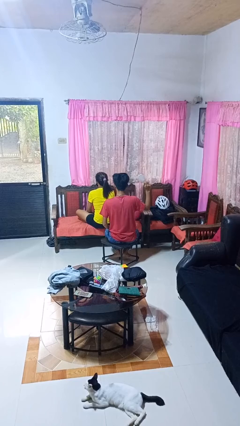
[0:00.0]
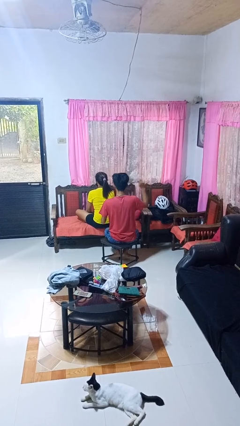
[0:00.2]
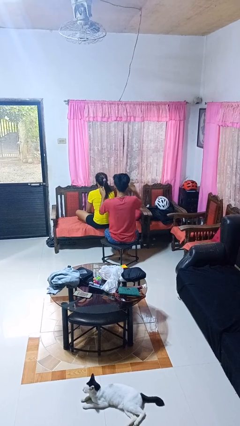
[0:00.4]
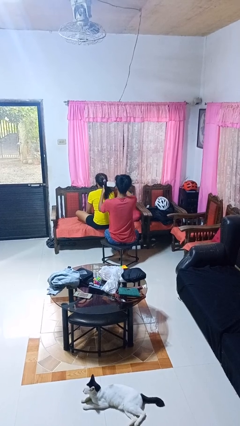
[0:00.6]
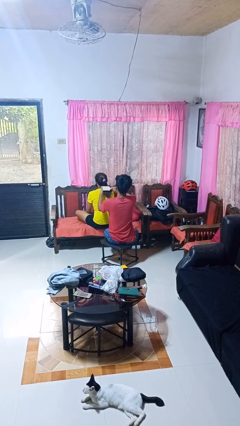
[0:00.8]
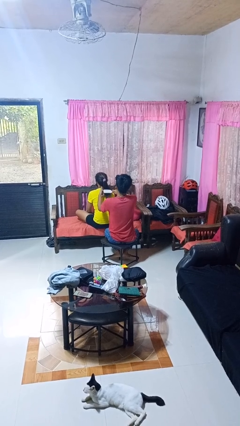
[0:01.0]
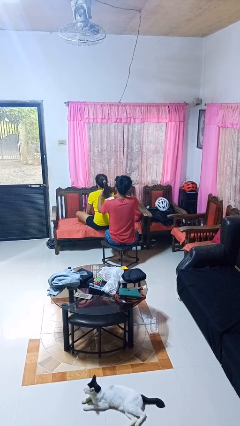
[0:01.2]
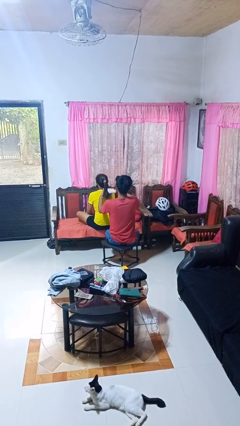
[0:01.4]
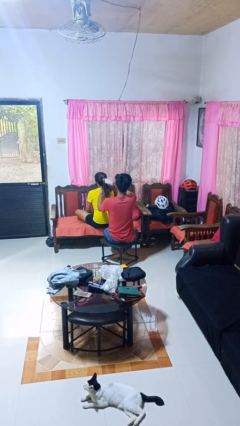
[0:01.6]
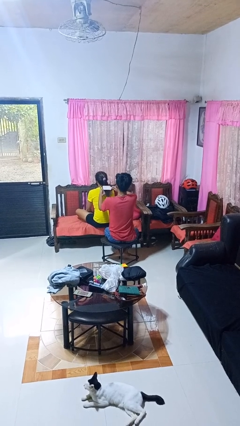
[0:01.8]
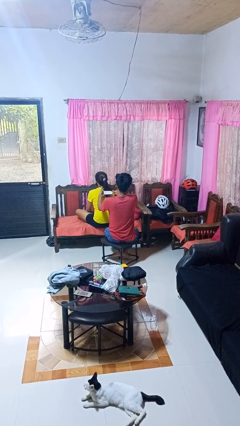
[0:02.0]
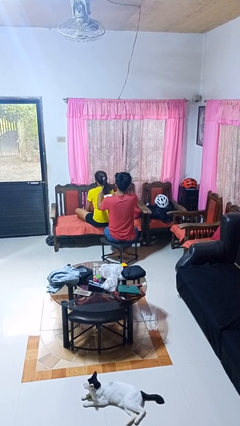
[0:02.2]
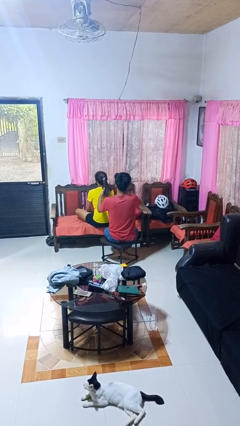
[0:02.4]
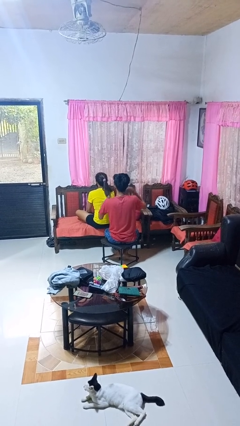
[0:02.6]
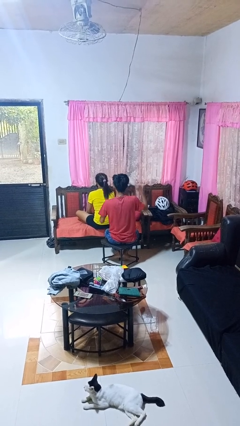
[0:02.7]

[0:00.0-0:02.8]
person brushes hair of person

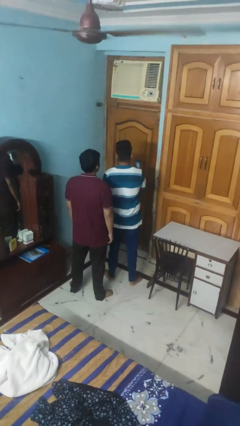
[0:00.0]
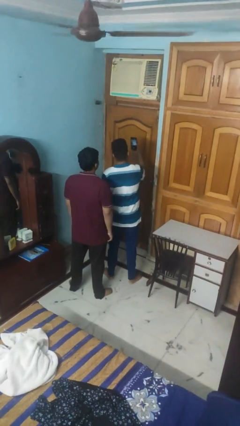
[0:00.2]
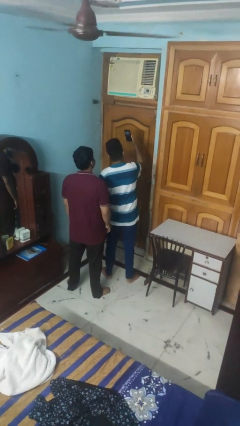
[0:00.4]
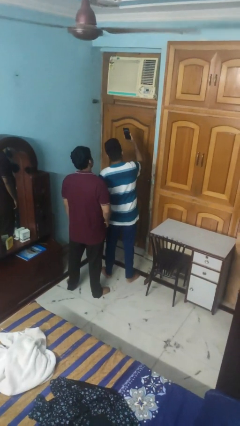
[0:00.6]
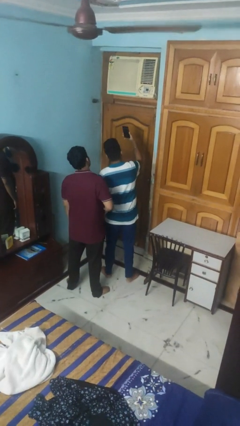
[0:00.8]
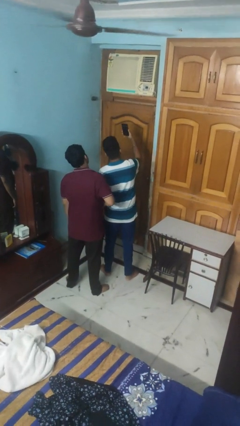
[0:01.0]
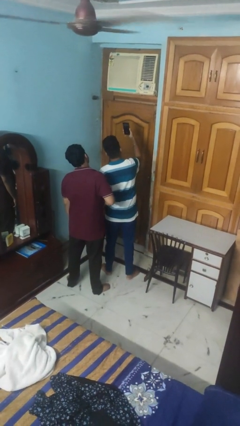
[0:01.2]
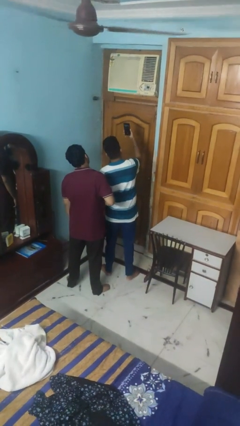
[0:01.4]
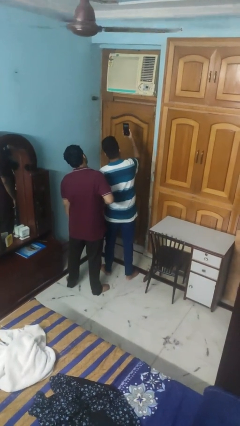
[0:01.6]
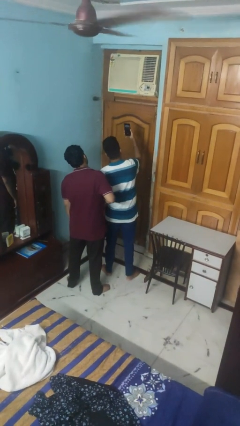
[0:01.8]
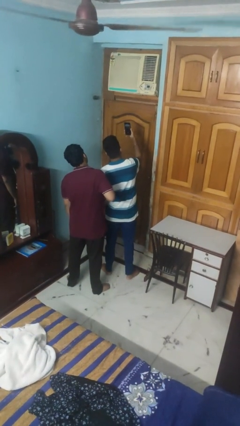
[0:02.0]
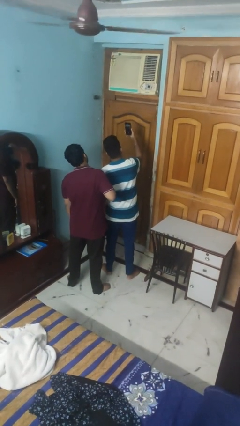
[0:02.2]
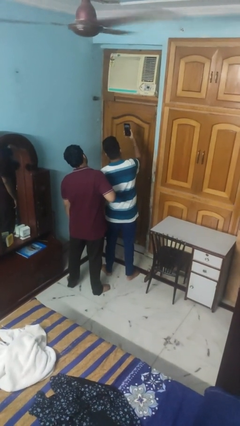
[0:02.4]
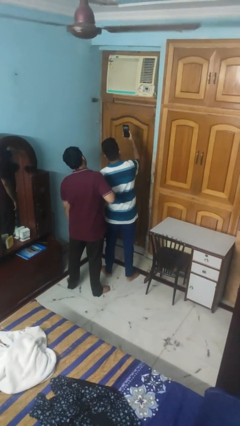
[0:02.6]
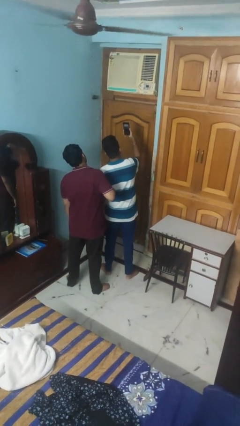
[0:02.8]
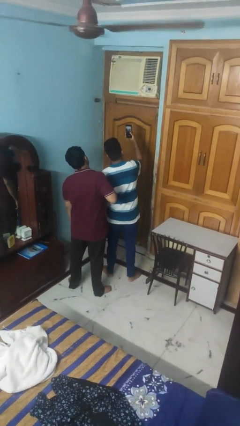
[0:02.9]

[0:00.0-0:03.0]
person takes selfie with person

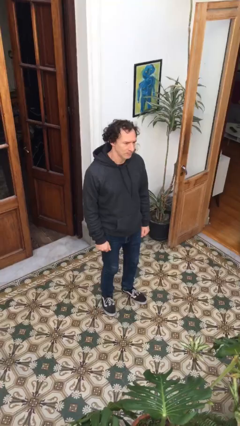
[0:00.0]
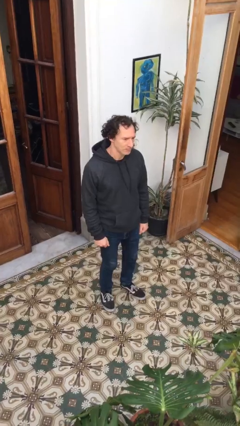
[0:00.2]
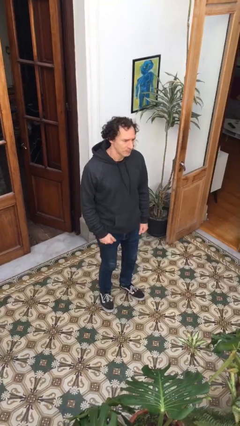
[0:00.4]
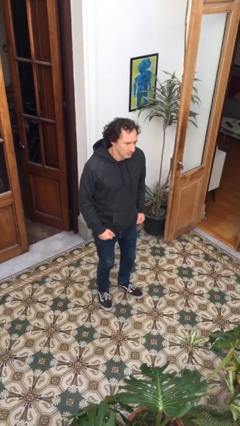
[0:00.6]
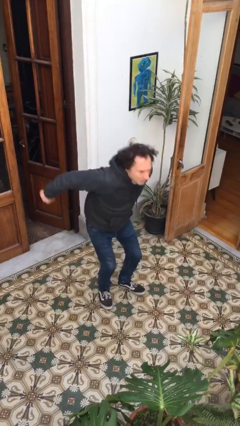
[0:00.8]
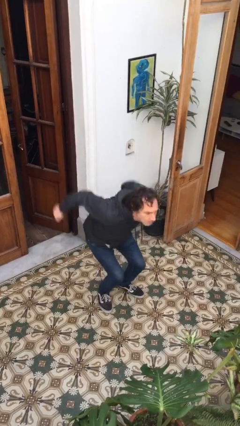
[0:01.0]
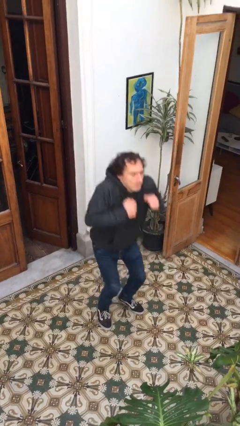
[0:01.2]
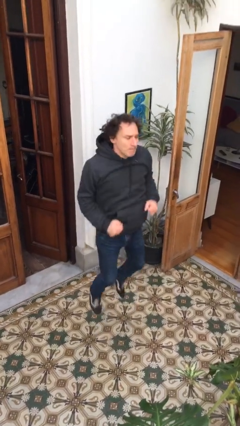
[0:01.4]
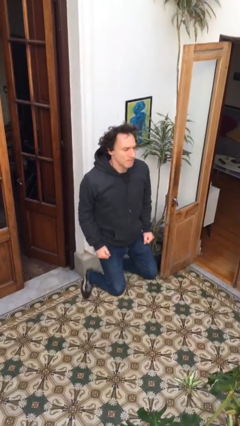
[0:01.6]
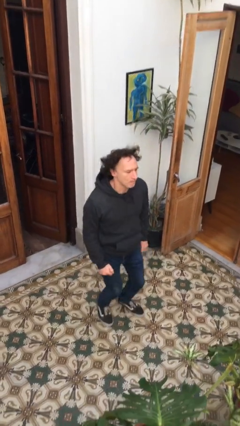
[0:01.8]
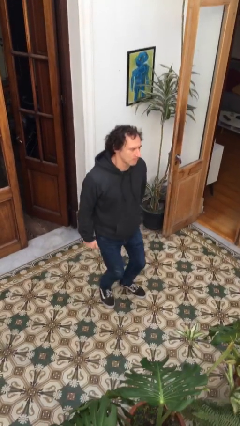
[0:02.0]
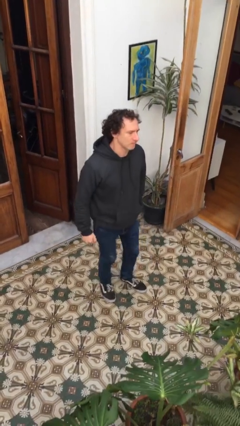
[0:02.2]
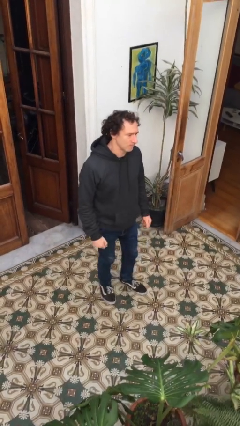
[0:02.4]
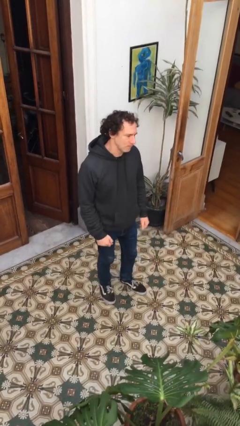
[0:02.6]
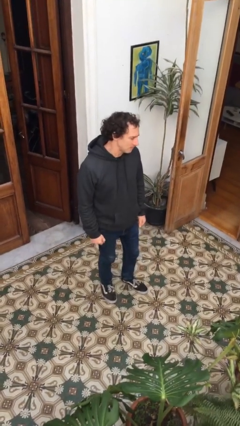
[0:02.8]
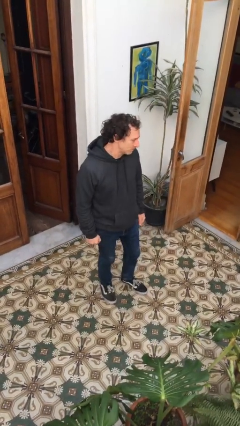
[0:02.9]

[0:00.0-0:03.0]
person jumps

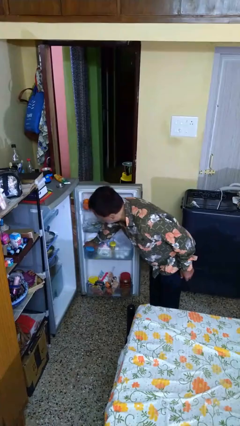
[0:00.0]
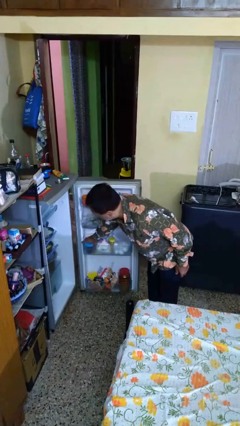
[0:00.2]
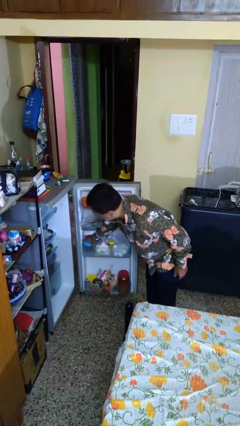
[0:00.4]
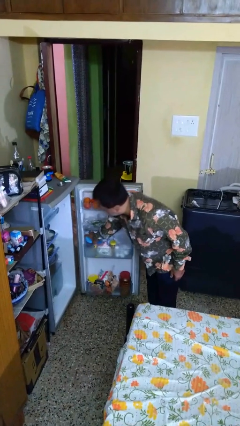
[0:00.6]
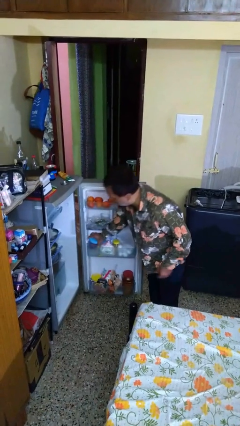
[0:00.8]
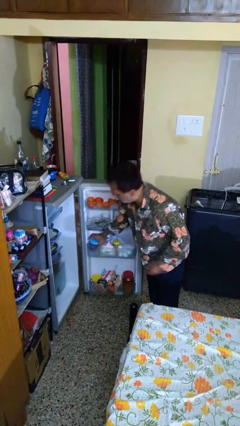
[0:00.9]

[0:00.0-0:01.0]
person takes object from refrigerator

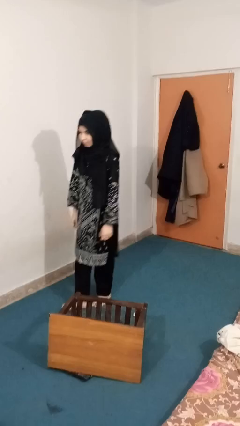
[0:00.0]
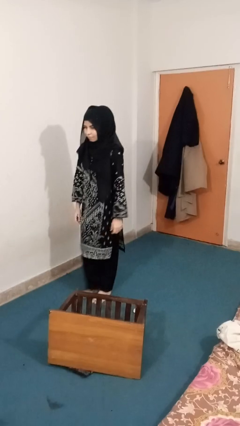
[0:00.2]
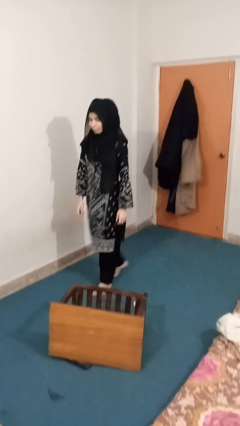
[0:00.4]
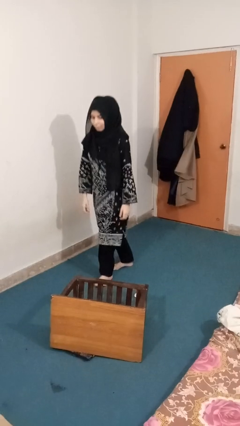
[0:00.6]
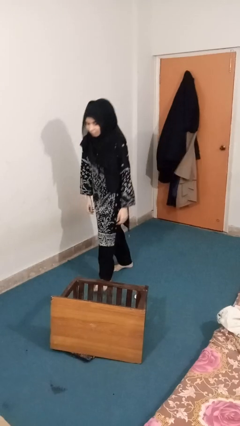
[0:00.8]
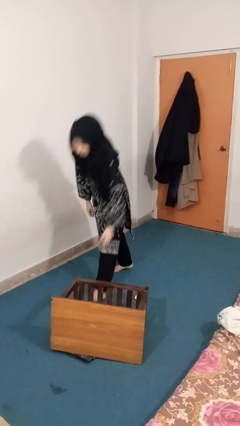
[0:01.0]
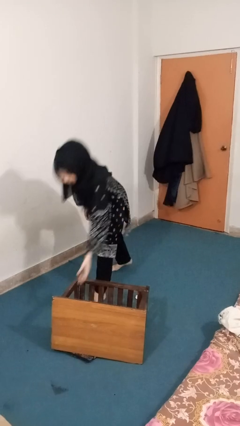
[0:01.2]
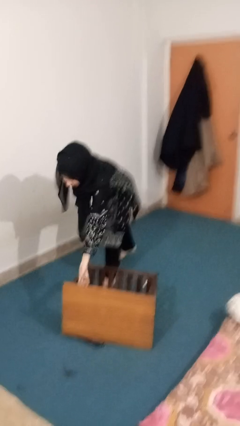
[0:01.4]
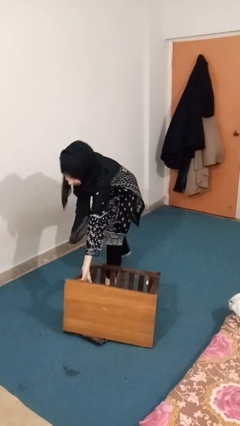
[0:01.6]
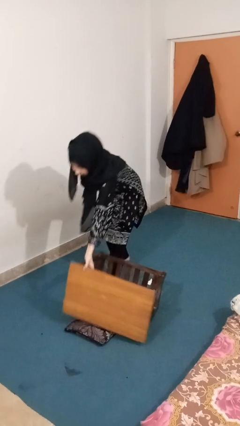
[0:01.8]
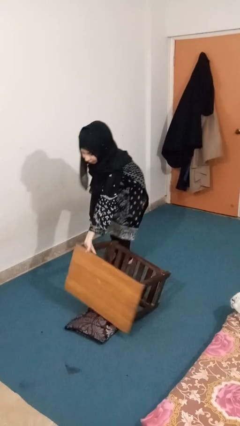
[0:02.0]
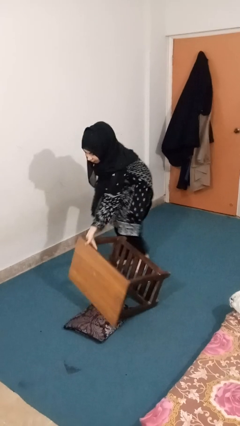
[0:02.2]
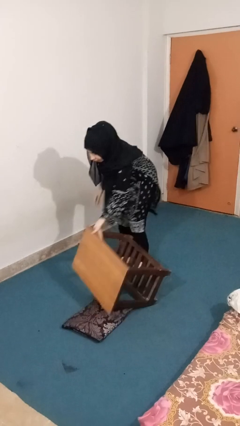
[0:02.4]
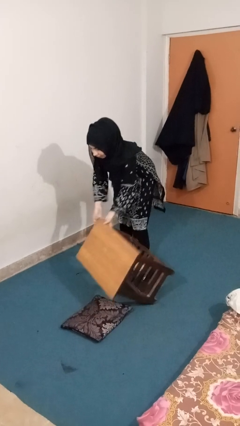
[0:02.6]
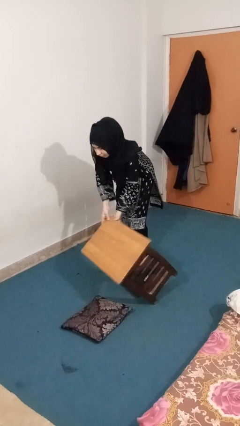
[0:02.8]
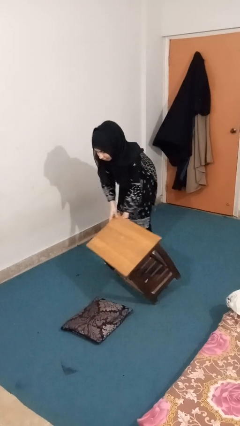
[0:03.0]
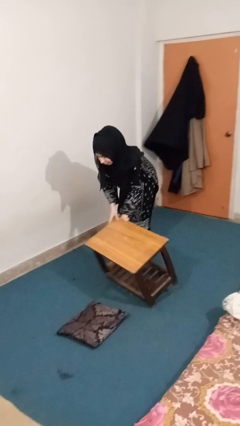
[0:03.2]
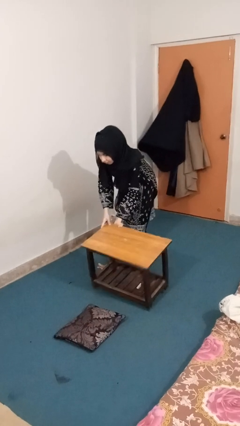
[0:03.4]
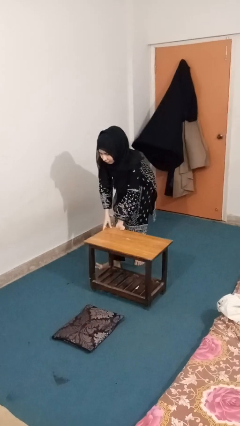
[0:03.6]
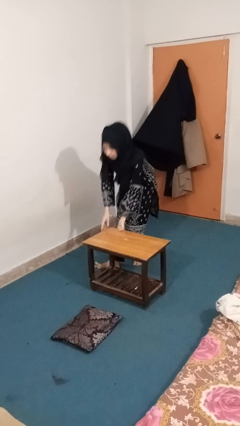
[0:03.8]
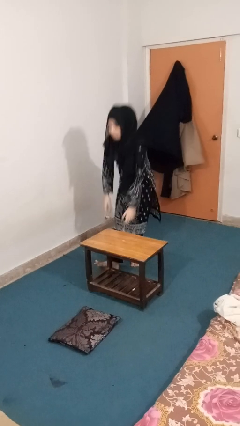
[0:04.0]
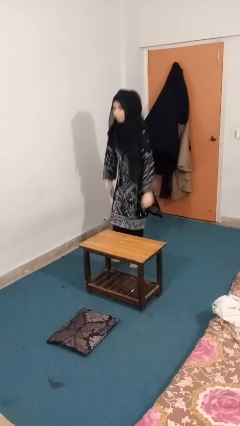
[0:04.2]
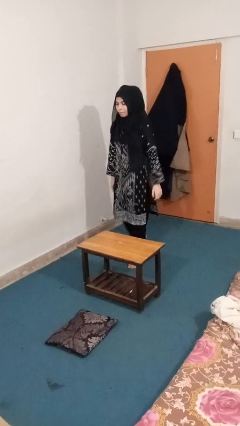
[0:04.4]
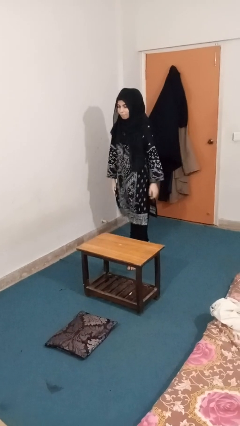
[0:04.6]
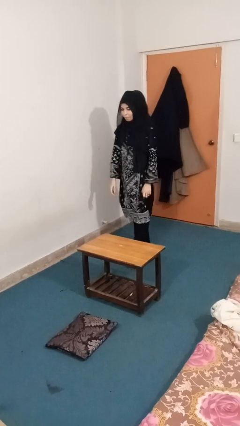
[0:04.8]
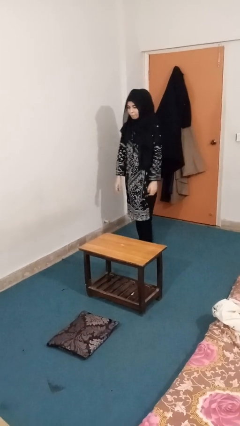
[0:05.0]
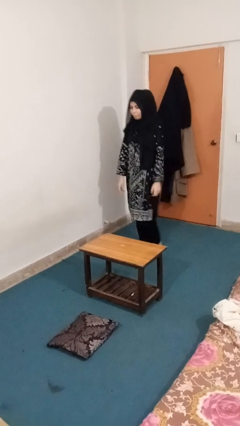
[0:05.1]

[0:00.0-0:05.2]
person sets upright furniture

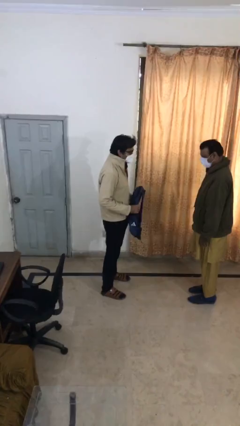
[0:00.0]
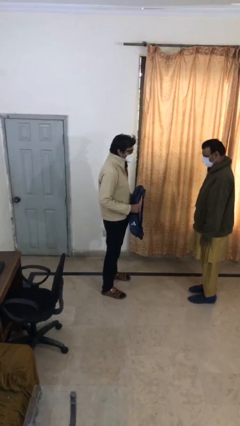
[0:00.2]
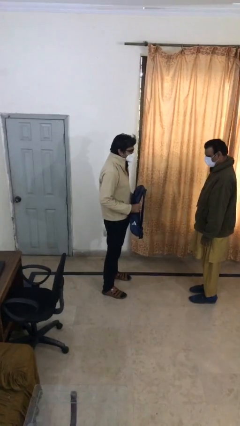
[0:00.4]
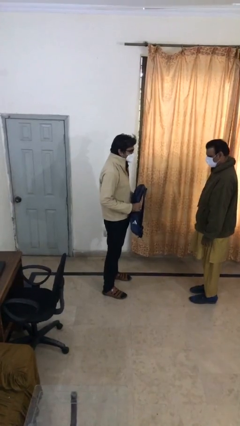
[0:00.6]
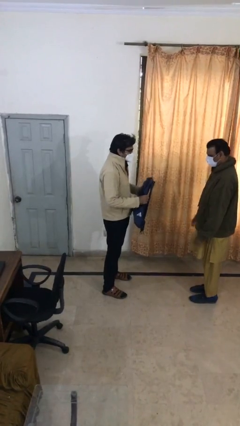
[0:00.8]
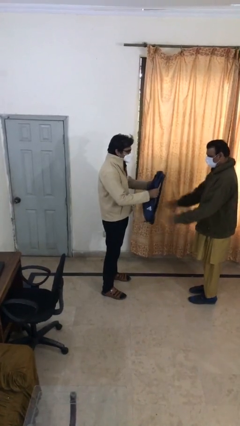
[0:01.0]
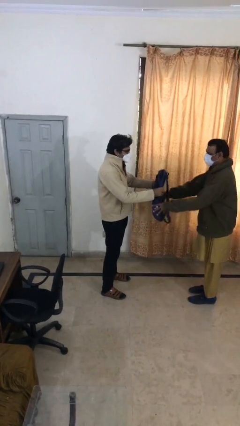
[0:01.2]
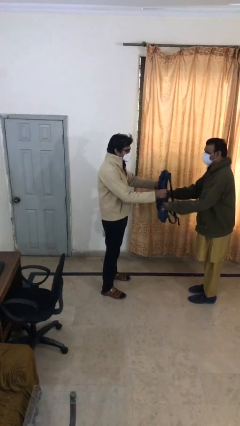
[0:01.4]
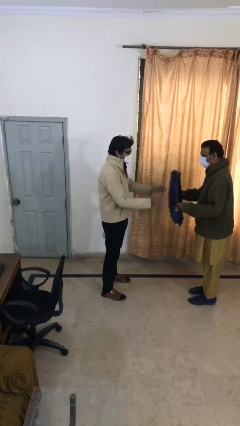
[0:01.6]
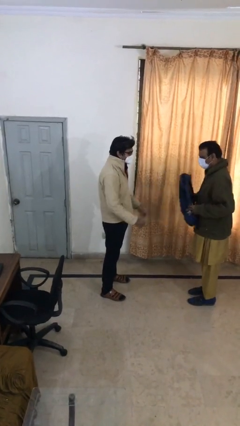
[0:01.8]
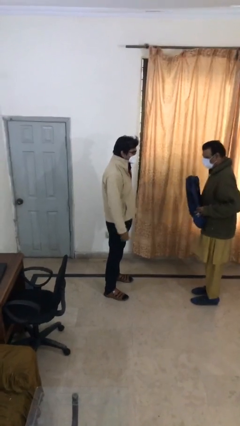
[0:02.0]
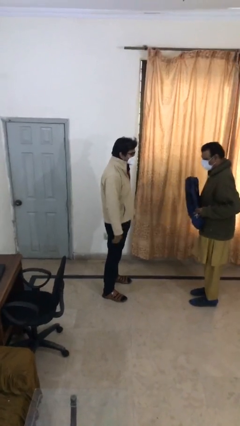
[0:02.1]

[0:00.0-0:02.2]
person transfers object to person

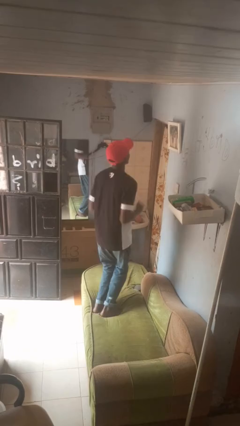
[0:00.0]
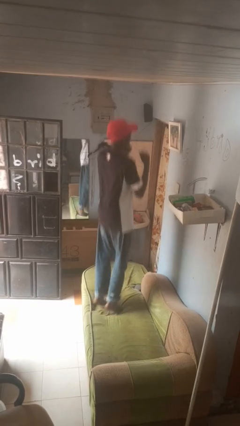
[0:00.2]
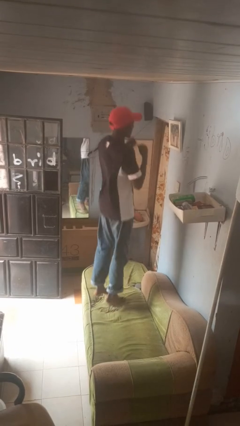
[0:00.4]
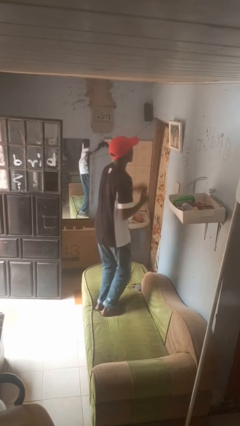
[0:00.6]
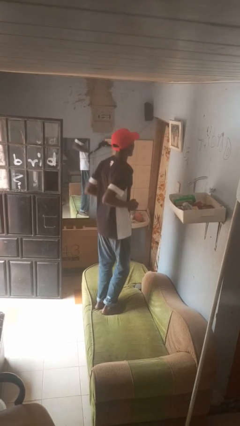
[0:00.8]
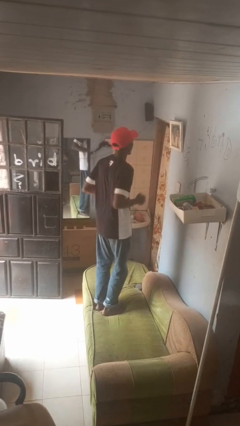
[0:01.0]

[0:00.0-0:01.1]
person jumps on couch
